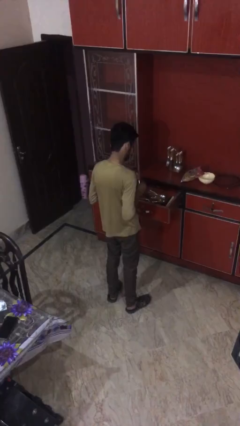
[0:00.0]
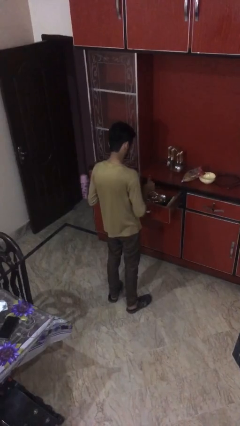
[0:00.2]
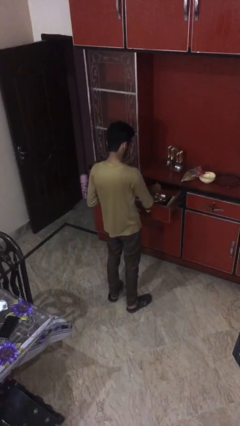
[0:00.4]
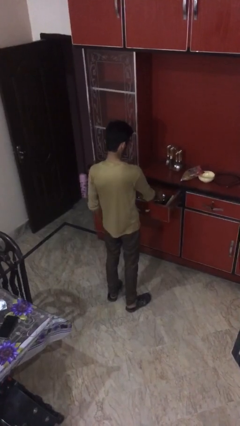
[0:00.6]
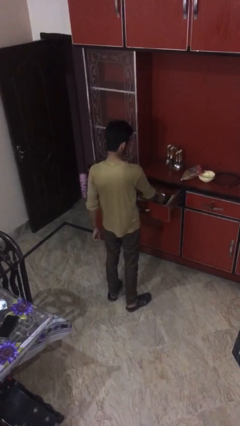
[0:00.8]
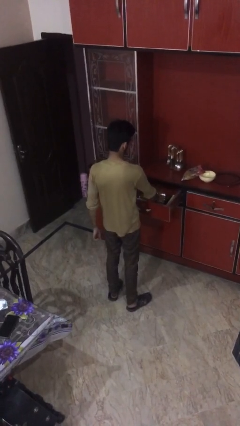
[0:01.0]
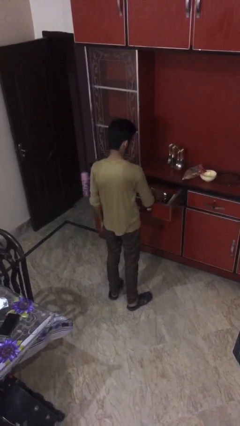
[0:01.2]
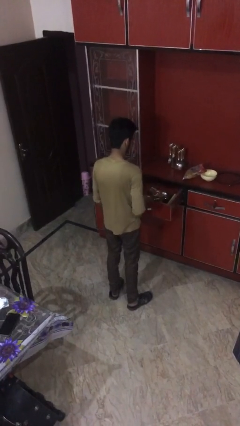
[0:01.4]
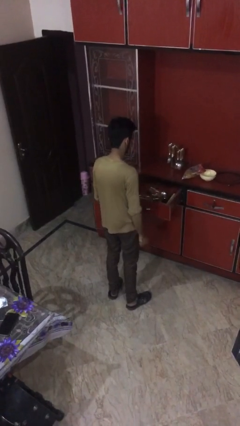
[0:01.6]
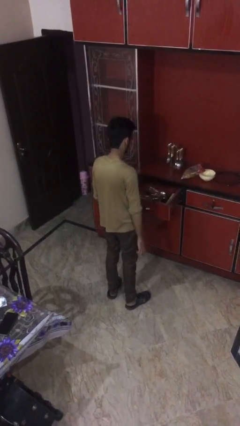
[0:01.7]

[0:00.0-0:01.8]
person puts object into kitchen drawer

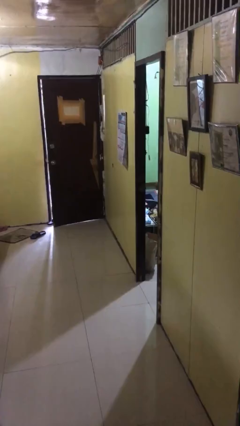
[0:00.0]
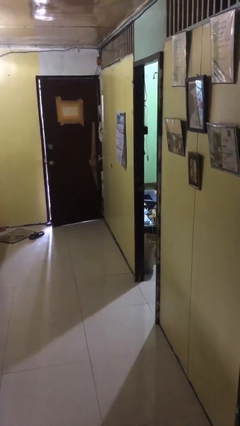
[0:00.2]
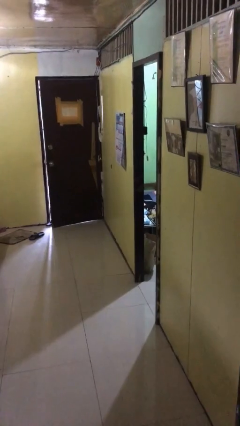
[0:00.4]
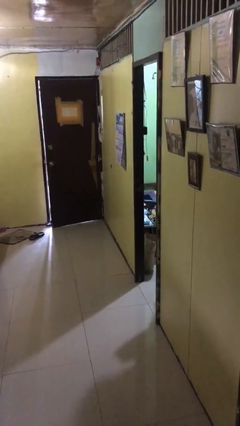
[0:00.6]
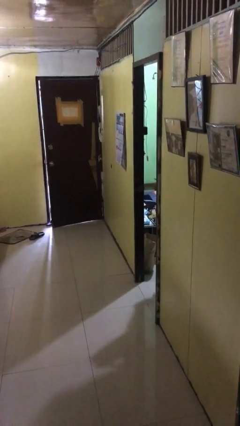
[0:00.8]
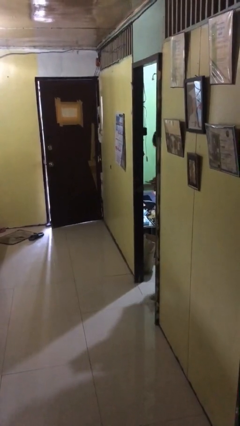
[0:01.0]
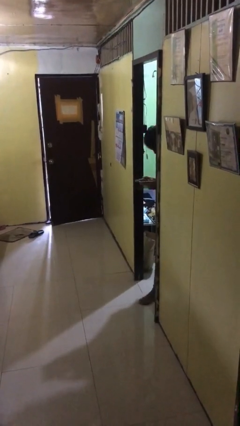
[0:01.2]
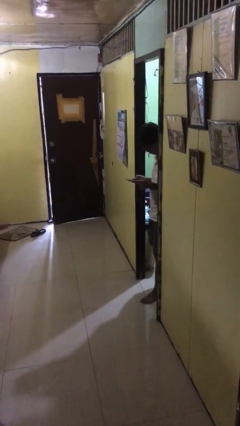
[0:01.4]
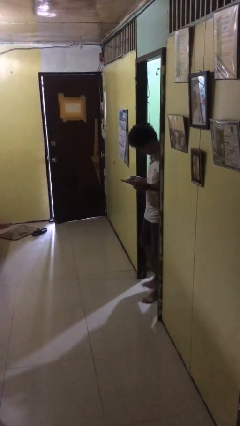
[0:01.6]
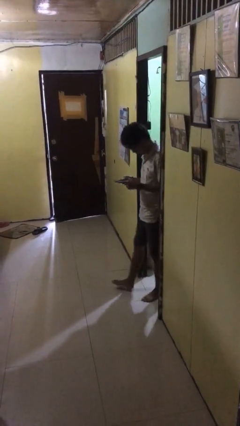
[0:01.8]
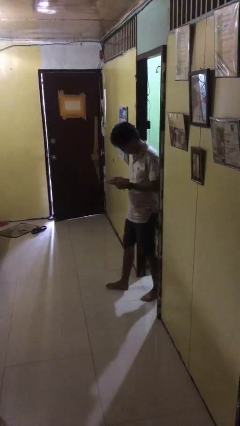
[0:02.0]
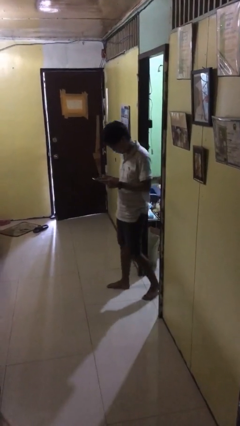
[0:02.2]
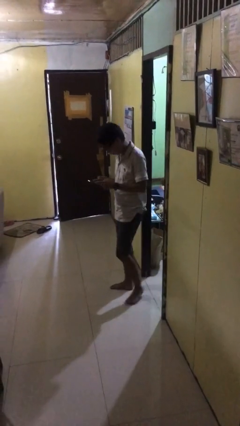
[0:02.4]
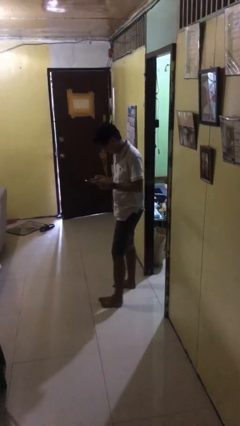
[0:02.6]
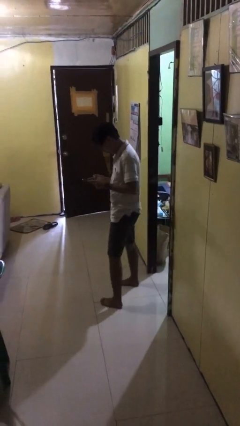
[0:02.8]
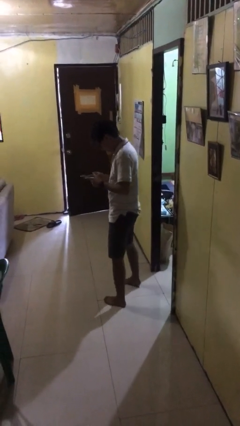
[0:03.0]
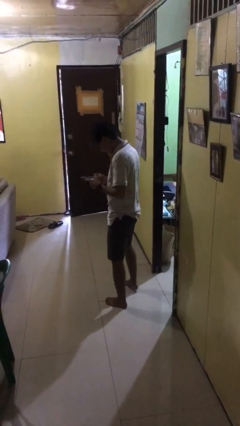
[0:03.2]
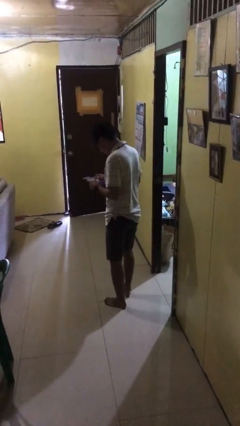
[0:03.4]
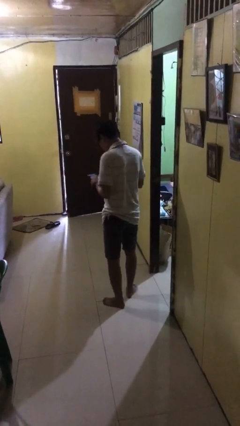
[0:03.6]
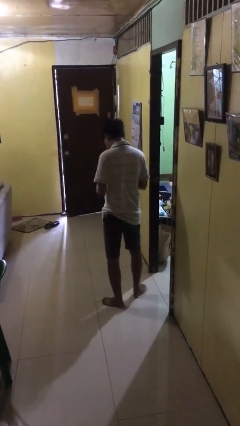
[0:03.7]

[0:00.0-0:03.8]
person enters scene through structure

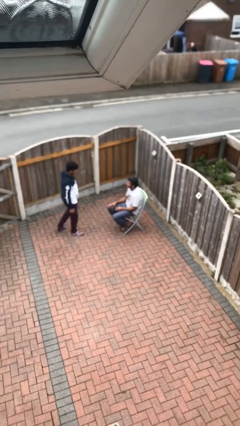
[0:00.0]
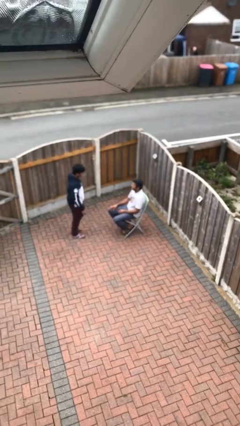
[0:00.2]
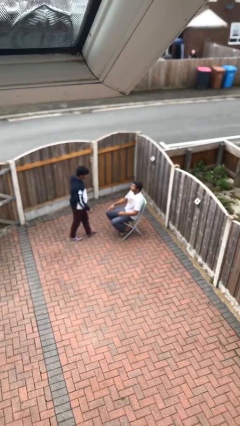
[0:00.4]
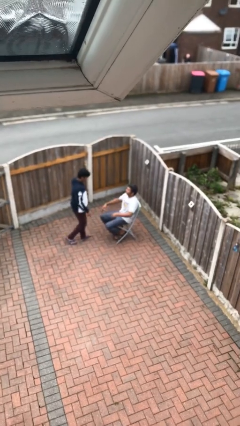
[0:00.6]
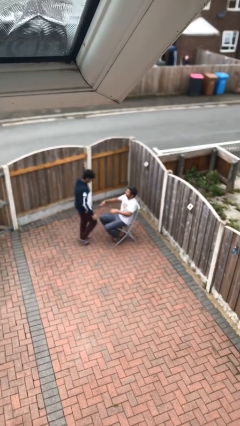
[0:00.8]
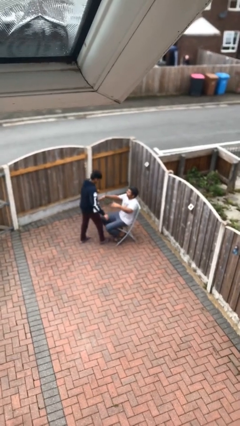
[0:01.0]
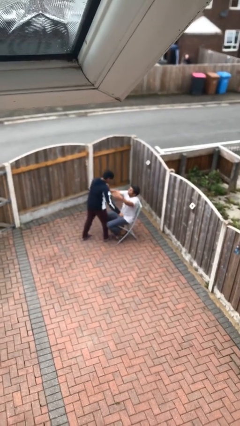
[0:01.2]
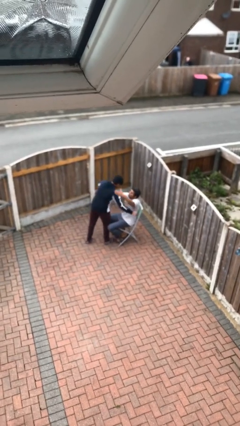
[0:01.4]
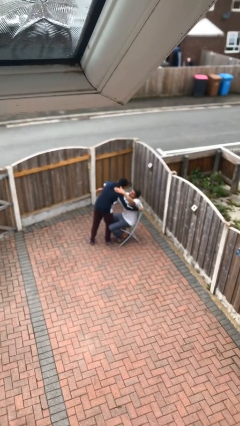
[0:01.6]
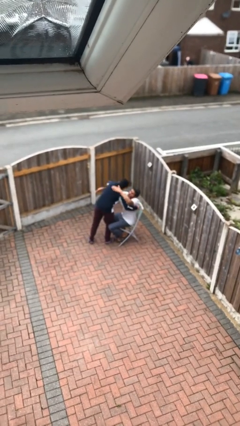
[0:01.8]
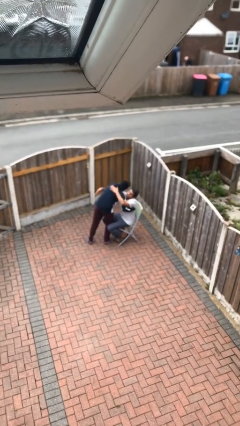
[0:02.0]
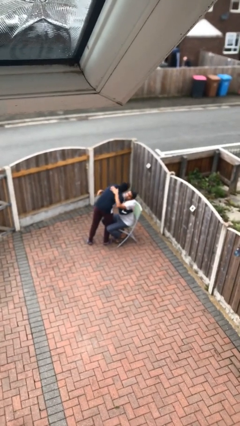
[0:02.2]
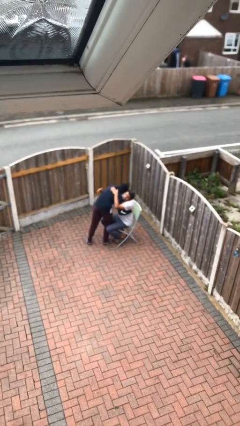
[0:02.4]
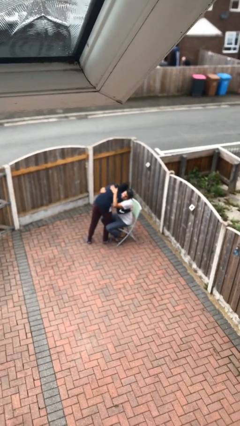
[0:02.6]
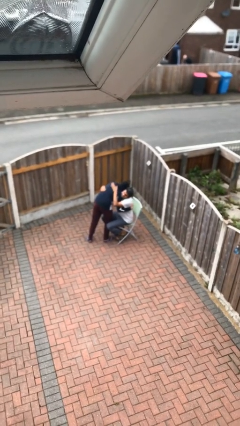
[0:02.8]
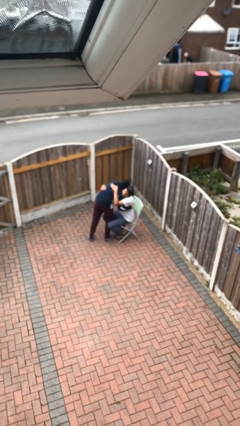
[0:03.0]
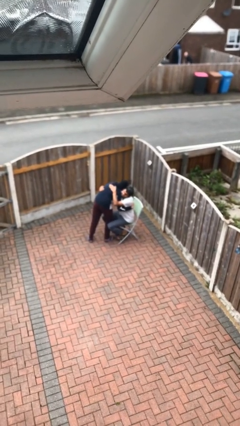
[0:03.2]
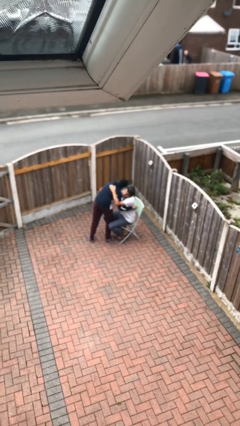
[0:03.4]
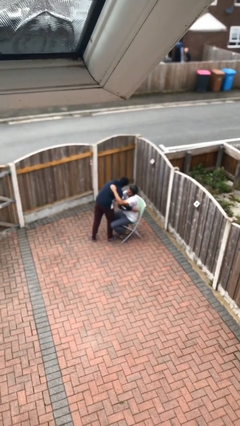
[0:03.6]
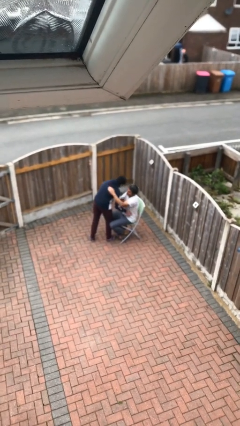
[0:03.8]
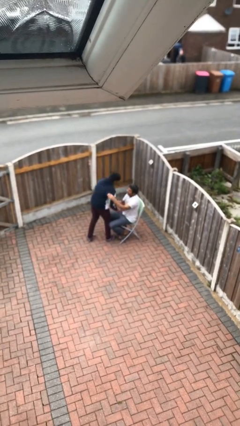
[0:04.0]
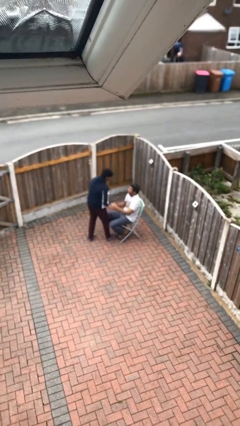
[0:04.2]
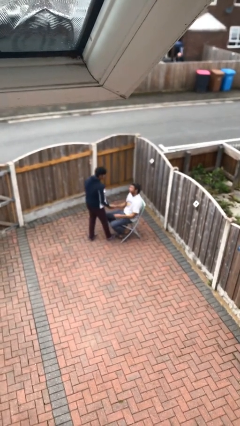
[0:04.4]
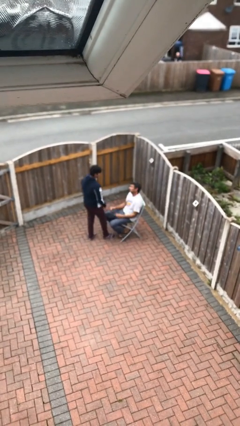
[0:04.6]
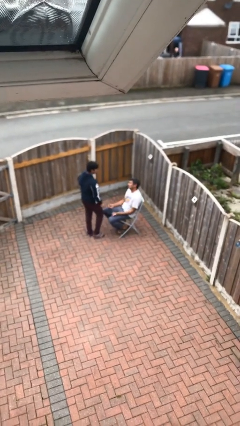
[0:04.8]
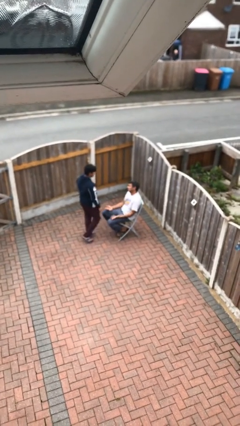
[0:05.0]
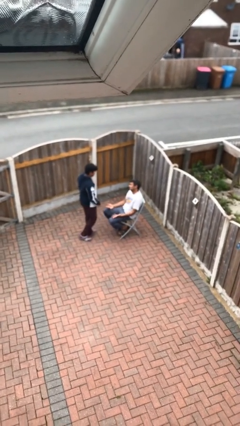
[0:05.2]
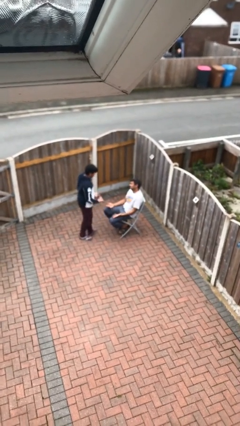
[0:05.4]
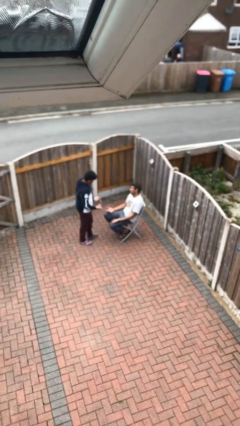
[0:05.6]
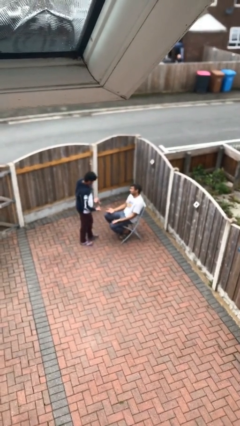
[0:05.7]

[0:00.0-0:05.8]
person embraces person

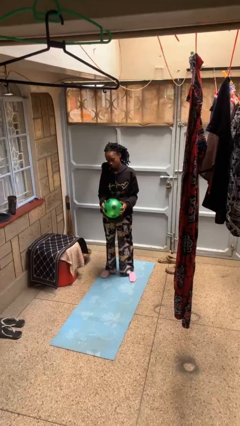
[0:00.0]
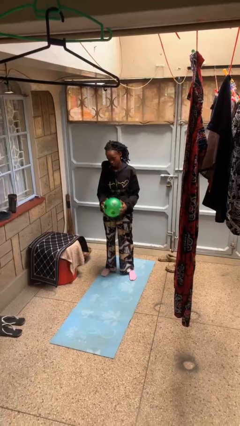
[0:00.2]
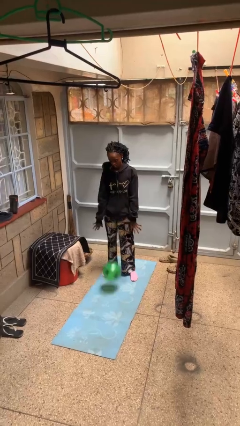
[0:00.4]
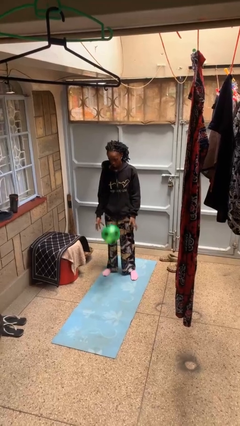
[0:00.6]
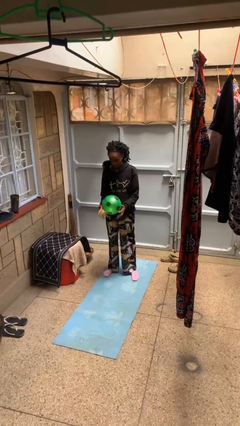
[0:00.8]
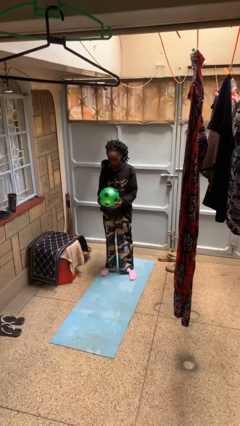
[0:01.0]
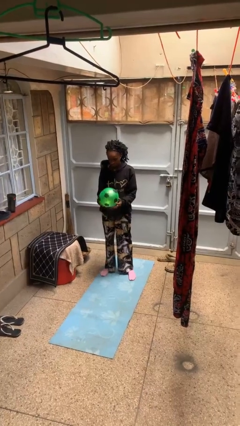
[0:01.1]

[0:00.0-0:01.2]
person bounces ball on floor

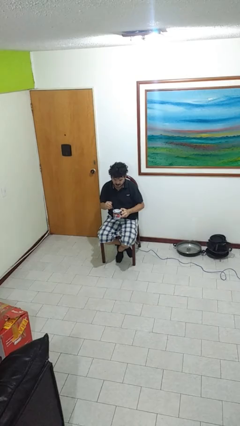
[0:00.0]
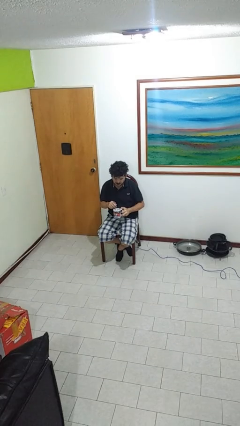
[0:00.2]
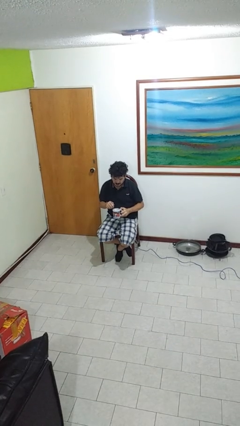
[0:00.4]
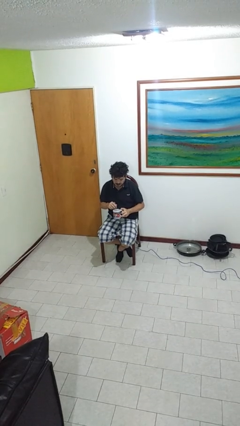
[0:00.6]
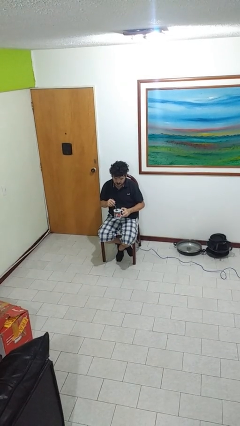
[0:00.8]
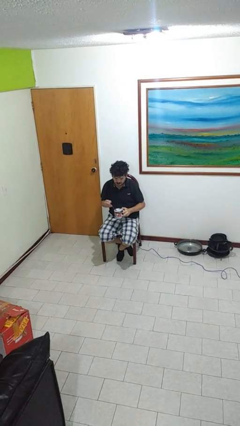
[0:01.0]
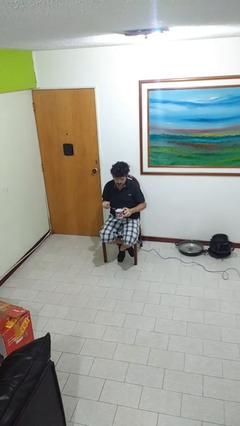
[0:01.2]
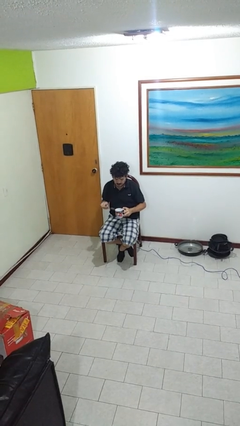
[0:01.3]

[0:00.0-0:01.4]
person stirs mug

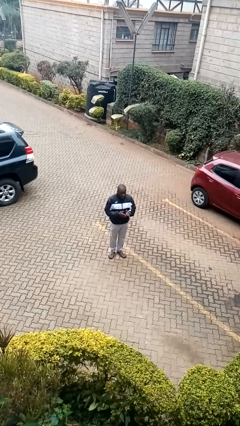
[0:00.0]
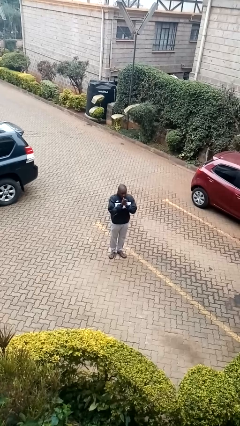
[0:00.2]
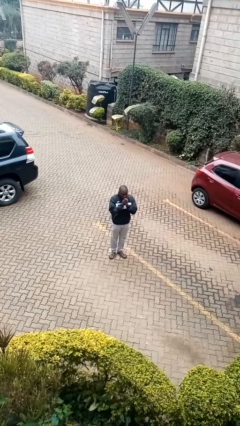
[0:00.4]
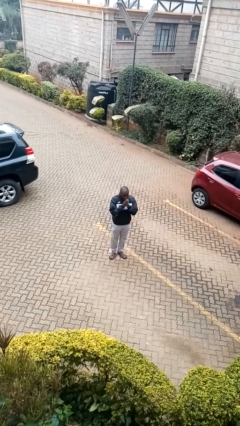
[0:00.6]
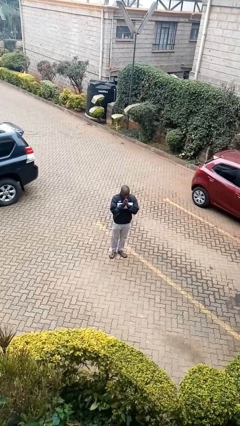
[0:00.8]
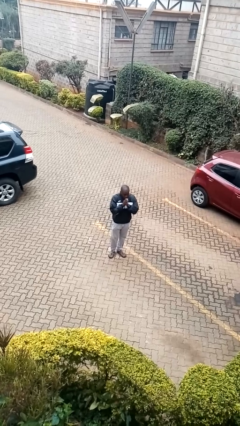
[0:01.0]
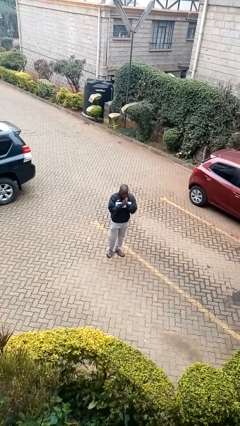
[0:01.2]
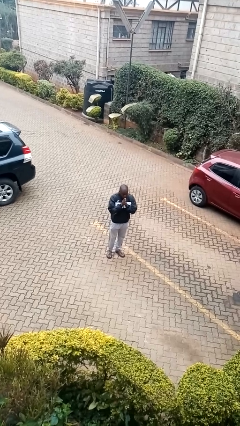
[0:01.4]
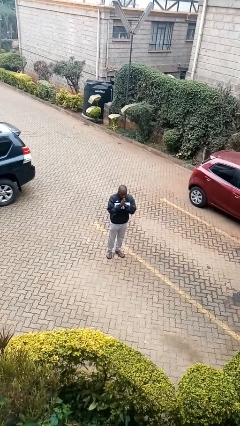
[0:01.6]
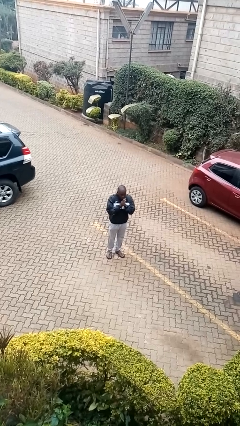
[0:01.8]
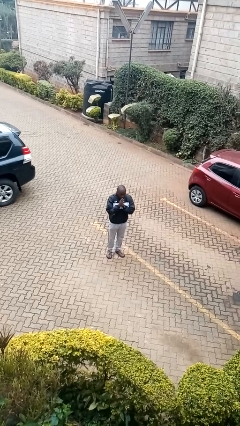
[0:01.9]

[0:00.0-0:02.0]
person blows into hands

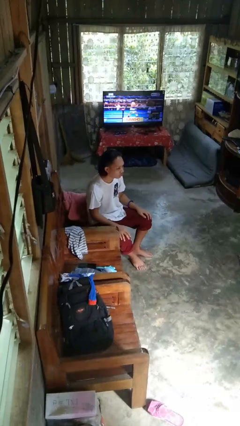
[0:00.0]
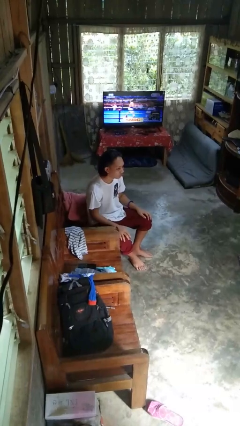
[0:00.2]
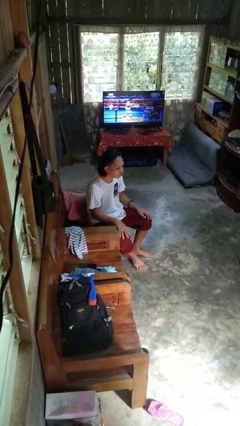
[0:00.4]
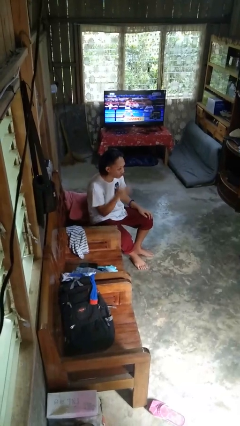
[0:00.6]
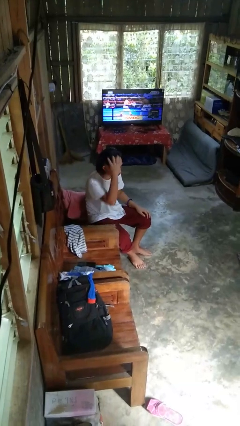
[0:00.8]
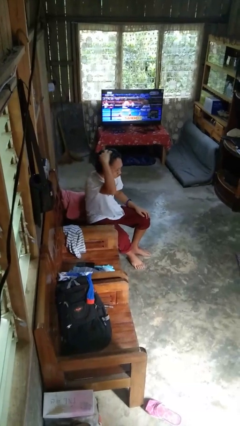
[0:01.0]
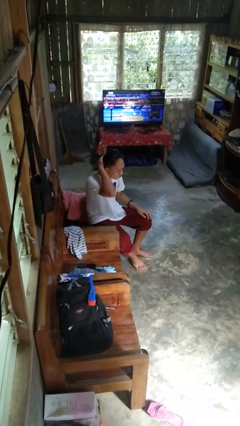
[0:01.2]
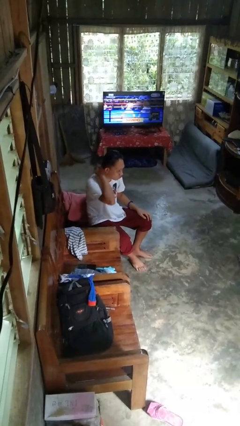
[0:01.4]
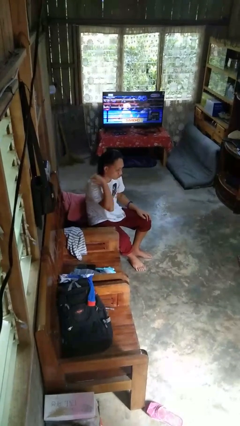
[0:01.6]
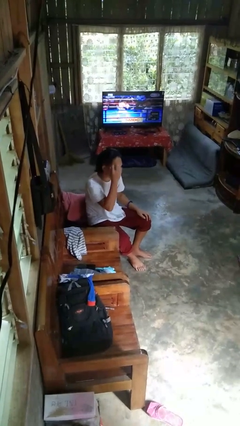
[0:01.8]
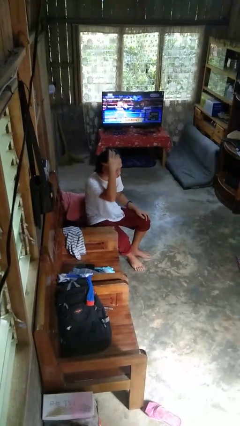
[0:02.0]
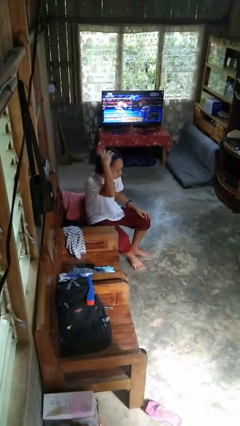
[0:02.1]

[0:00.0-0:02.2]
person strokes hair
